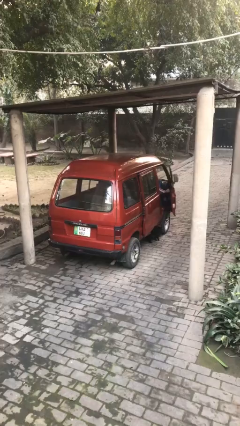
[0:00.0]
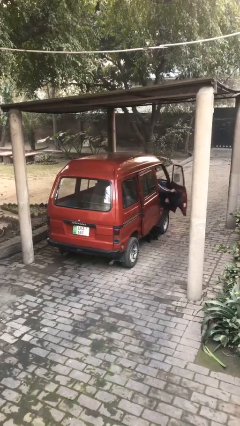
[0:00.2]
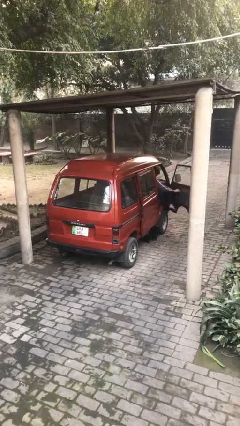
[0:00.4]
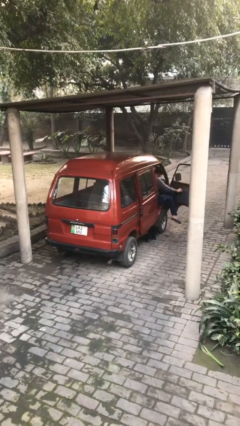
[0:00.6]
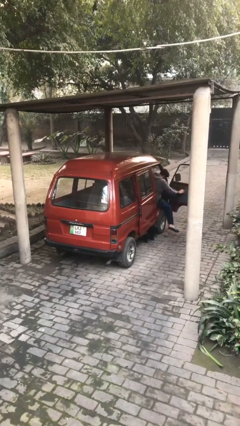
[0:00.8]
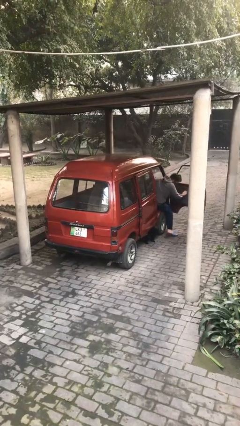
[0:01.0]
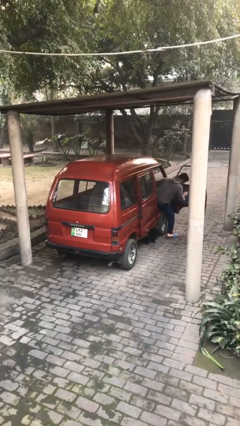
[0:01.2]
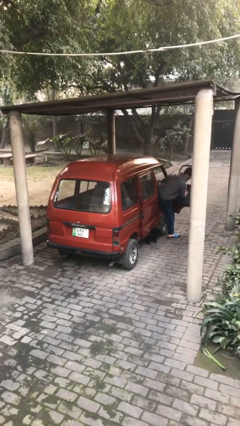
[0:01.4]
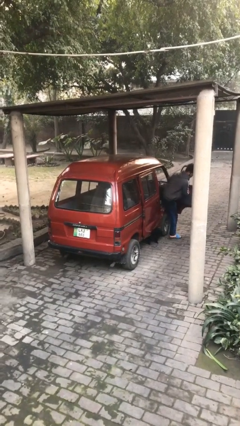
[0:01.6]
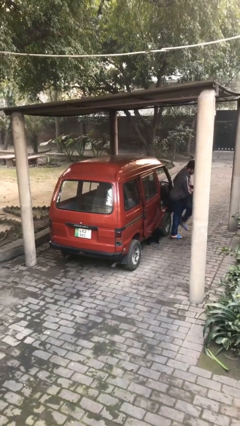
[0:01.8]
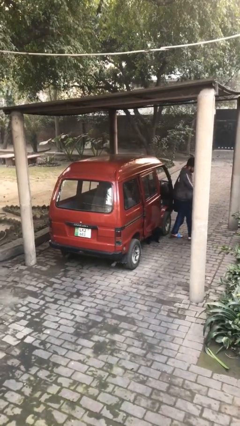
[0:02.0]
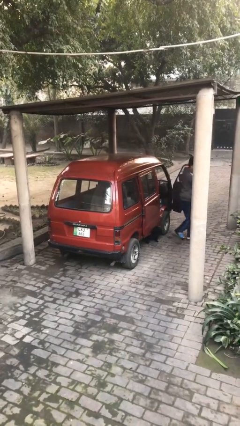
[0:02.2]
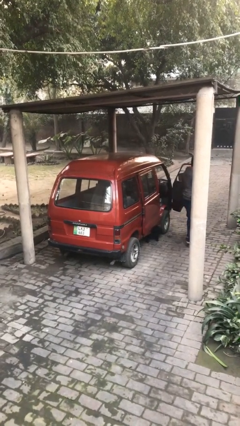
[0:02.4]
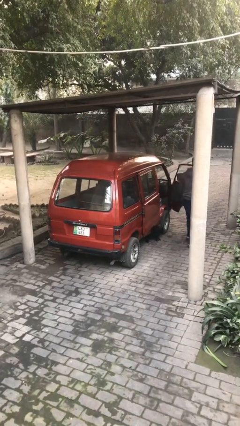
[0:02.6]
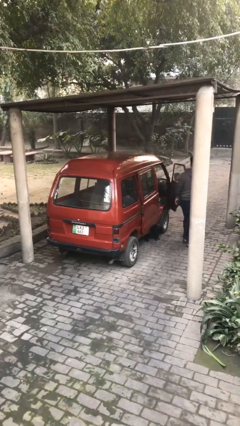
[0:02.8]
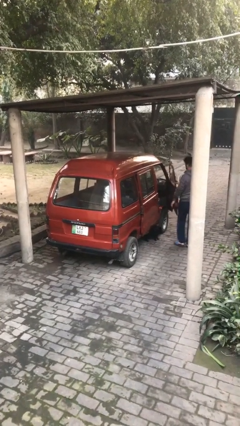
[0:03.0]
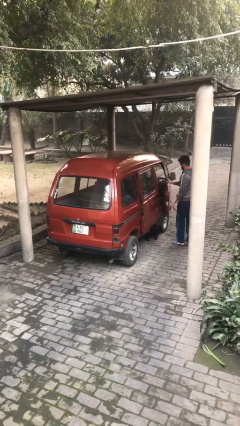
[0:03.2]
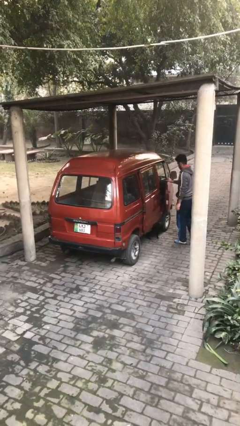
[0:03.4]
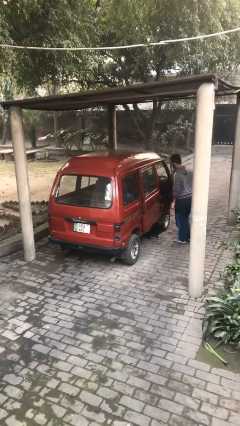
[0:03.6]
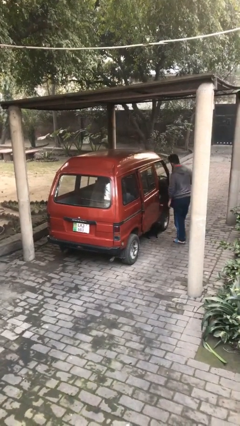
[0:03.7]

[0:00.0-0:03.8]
car drops off person

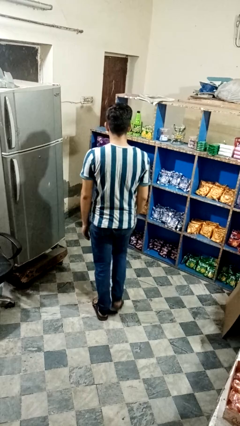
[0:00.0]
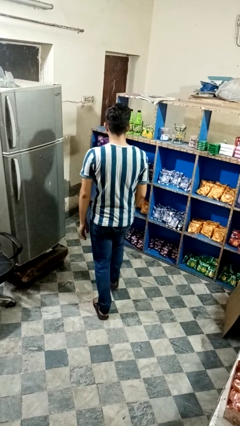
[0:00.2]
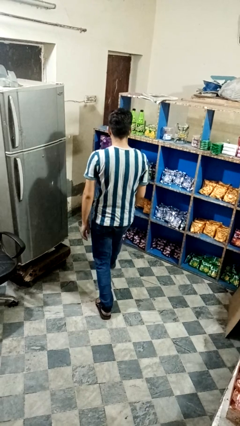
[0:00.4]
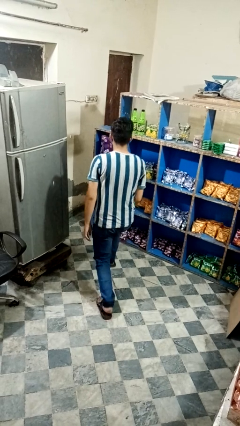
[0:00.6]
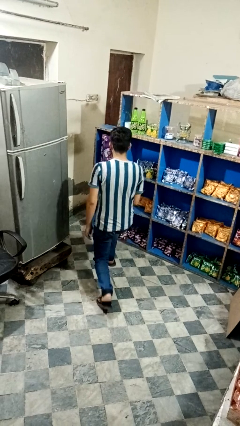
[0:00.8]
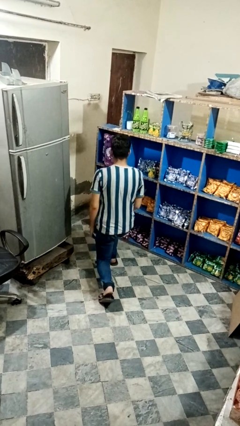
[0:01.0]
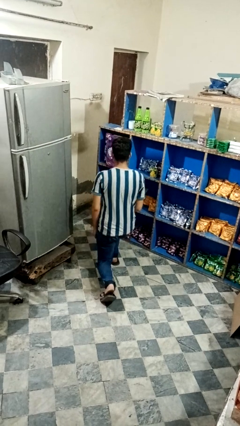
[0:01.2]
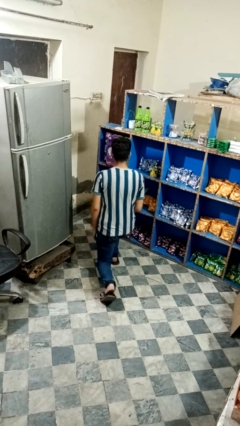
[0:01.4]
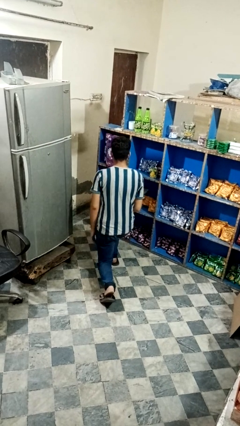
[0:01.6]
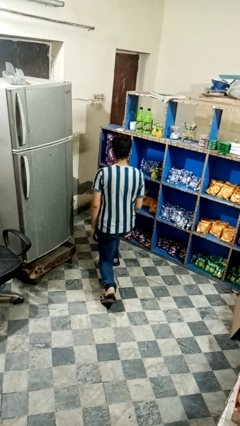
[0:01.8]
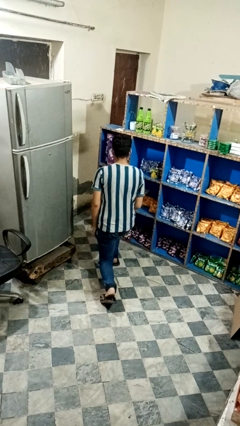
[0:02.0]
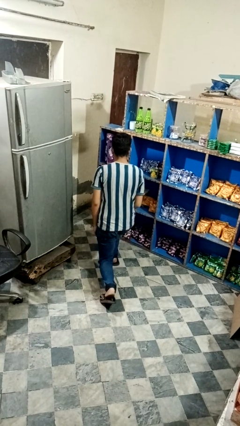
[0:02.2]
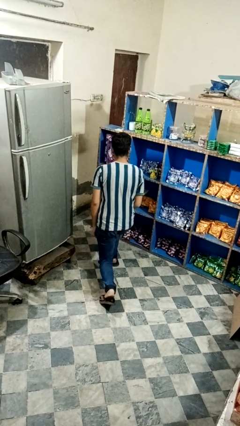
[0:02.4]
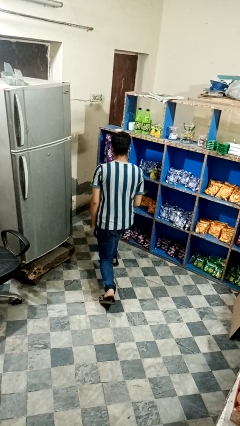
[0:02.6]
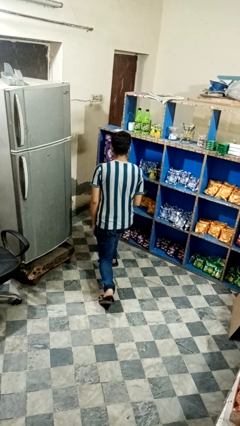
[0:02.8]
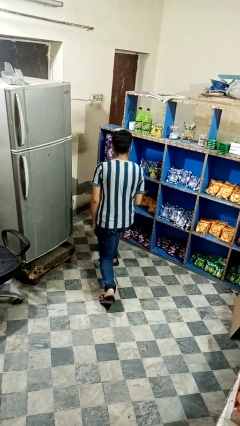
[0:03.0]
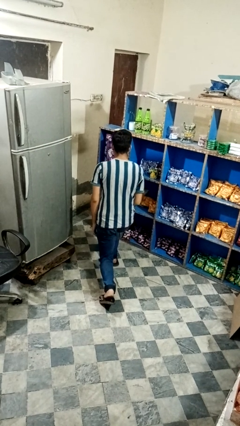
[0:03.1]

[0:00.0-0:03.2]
person exercises with lunges

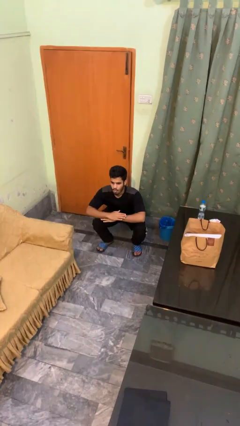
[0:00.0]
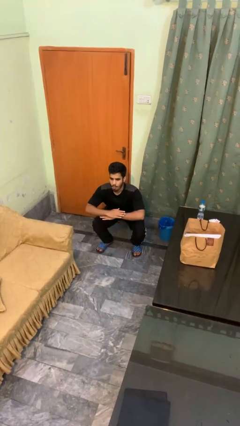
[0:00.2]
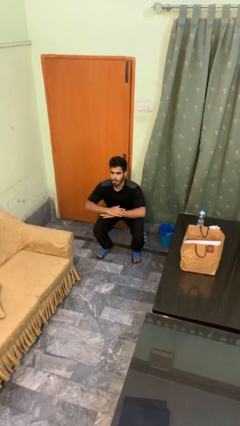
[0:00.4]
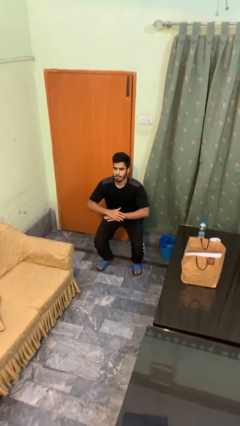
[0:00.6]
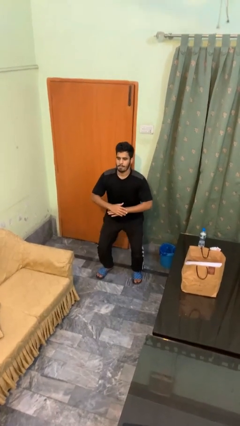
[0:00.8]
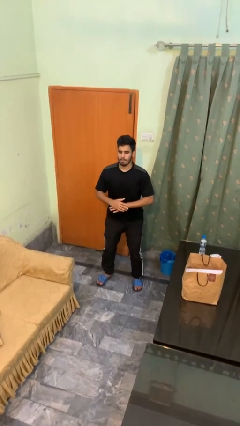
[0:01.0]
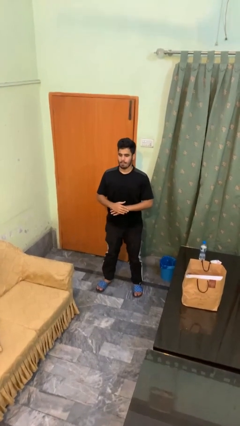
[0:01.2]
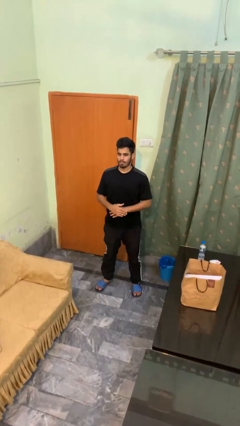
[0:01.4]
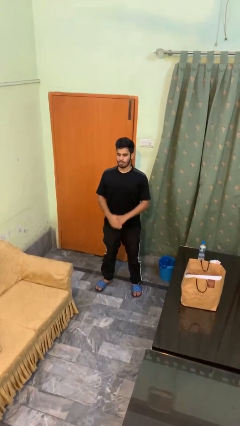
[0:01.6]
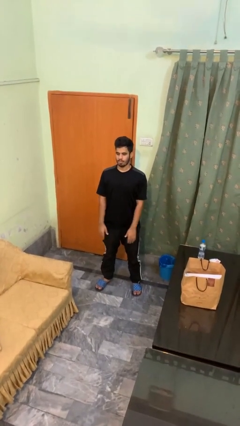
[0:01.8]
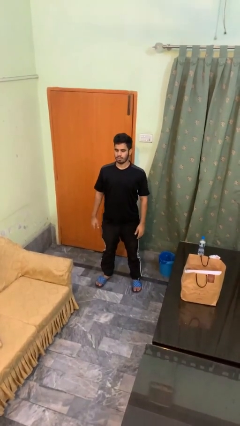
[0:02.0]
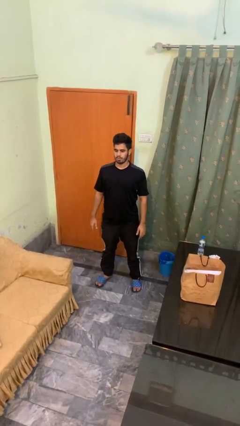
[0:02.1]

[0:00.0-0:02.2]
person stands up

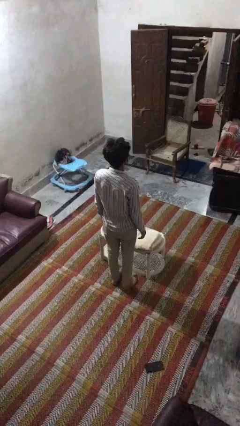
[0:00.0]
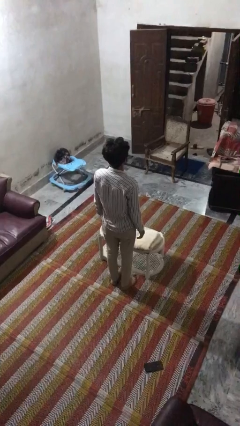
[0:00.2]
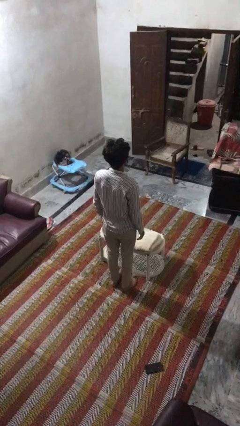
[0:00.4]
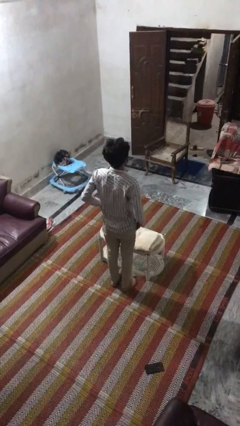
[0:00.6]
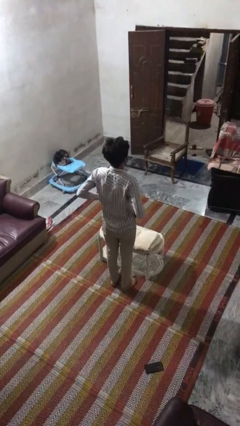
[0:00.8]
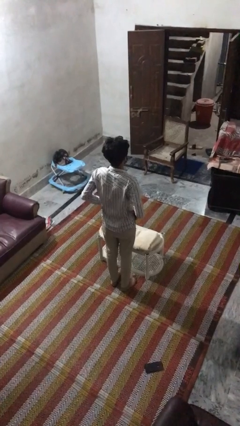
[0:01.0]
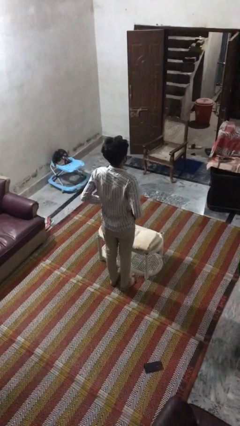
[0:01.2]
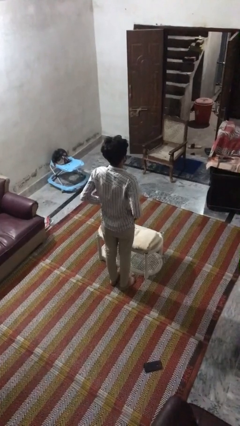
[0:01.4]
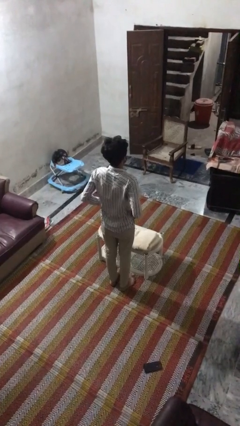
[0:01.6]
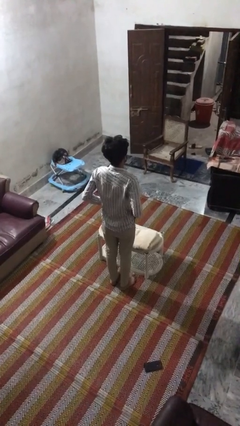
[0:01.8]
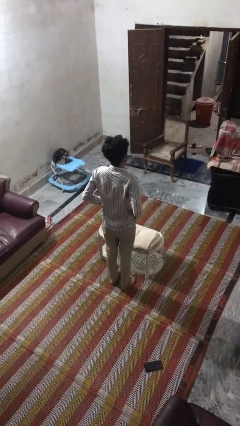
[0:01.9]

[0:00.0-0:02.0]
person puts hands in back pockets

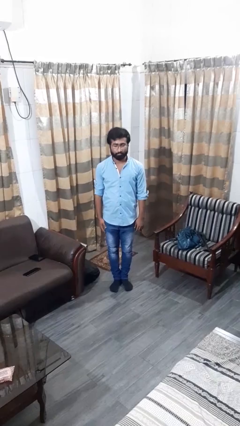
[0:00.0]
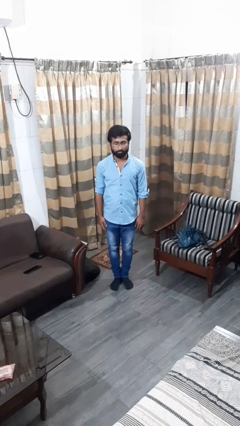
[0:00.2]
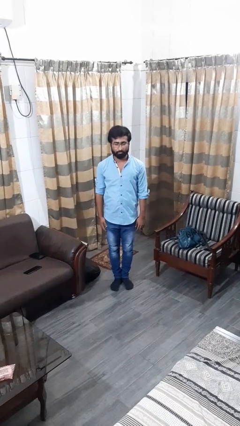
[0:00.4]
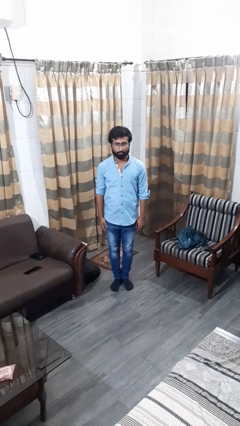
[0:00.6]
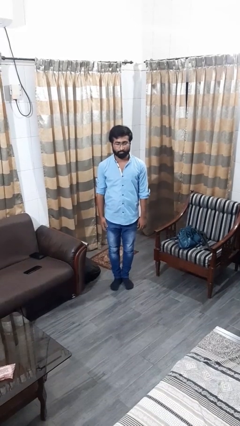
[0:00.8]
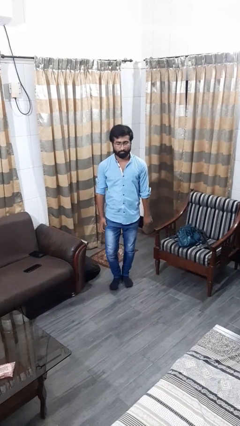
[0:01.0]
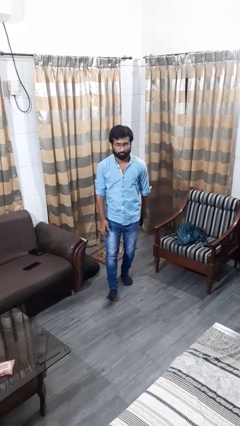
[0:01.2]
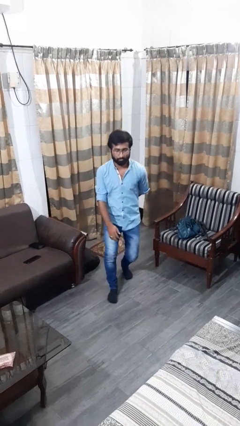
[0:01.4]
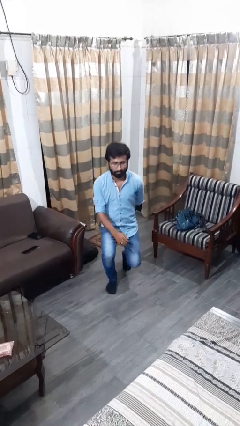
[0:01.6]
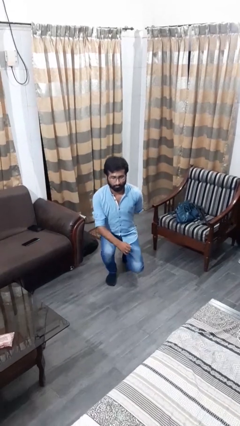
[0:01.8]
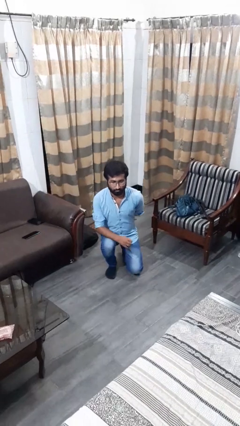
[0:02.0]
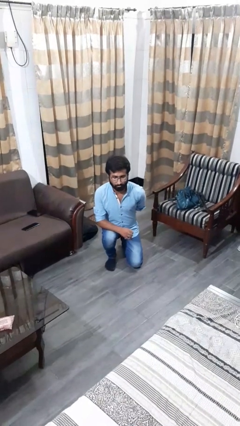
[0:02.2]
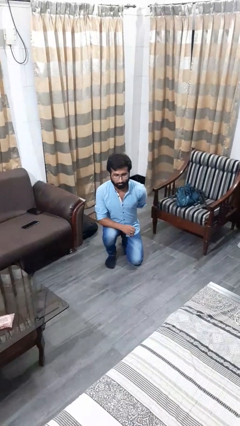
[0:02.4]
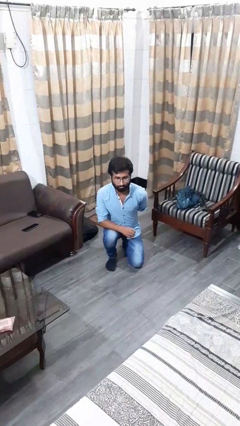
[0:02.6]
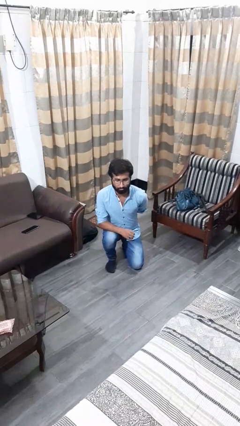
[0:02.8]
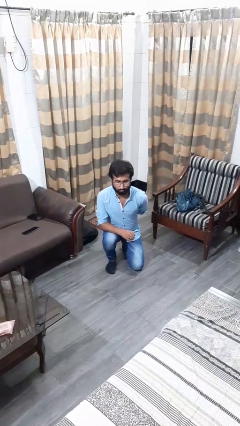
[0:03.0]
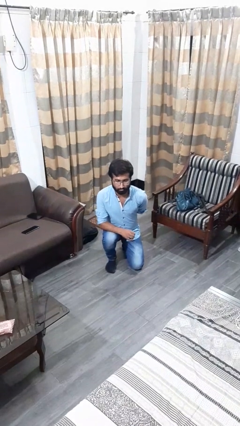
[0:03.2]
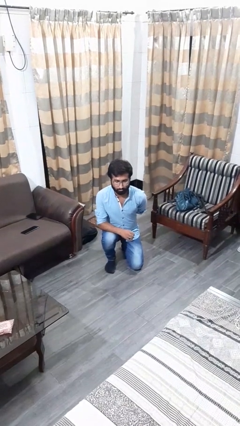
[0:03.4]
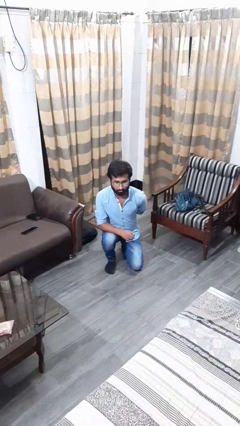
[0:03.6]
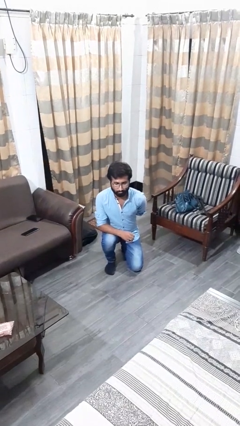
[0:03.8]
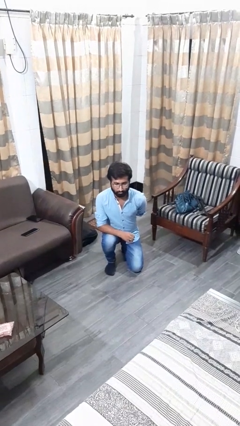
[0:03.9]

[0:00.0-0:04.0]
person kneels

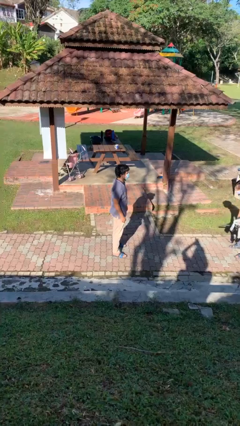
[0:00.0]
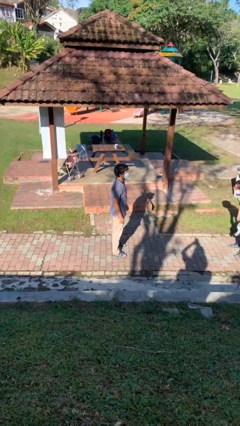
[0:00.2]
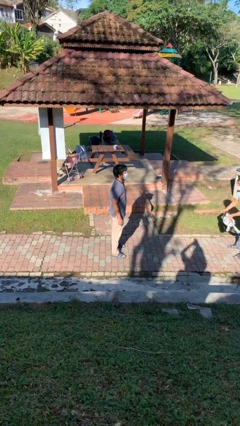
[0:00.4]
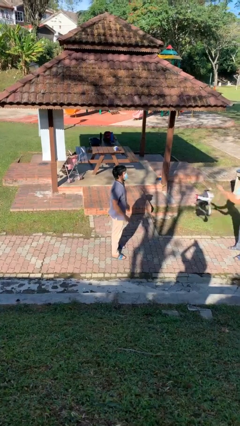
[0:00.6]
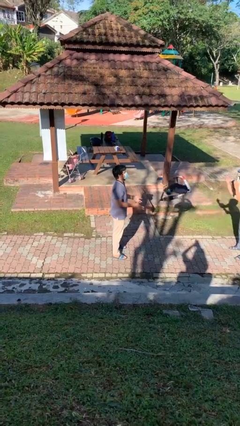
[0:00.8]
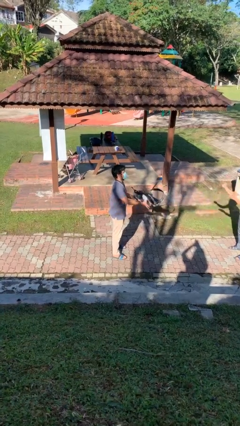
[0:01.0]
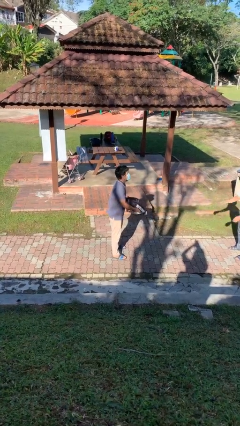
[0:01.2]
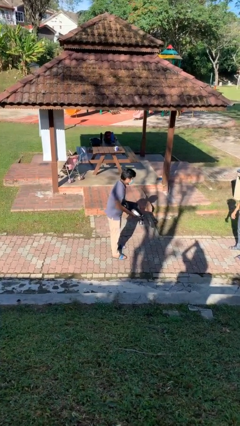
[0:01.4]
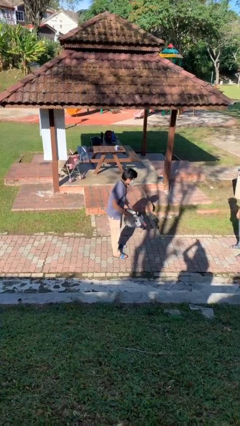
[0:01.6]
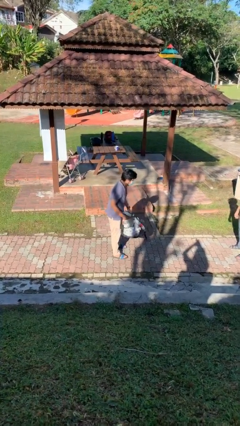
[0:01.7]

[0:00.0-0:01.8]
person catches object from person
